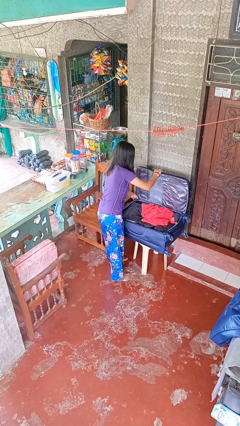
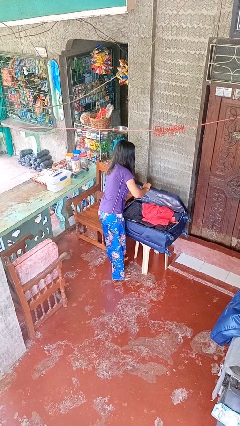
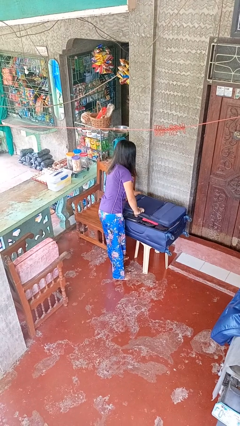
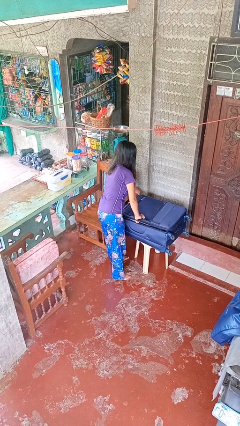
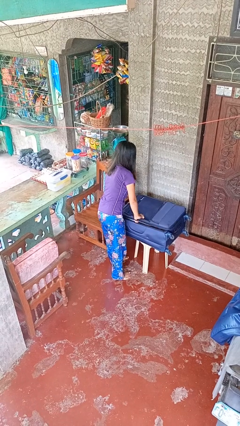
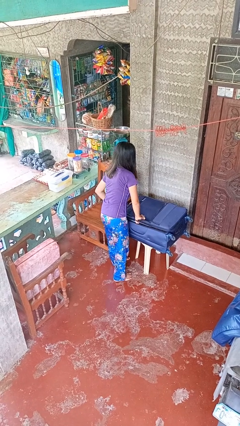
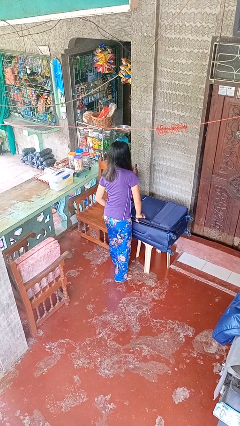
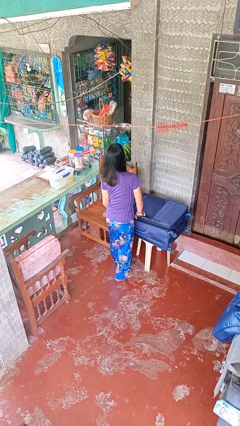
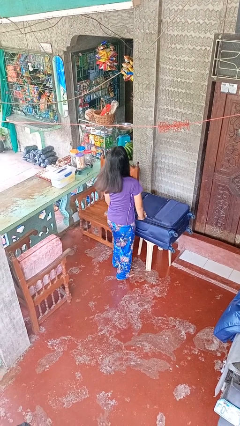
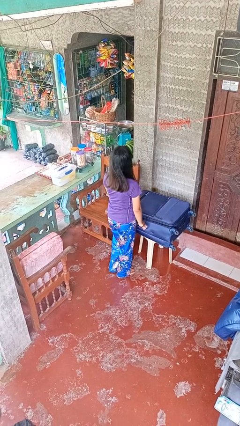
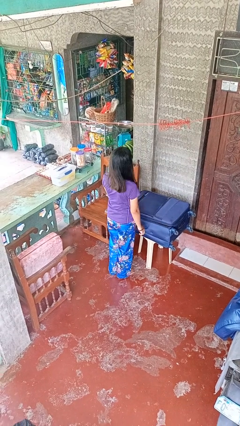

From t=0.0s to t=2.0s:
person closes suitcase

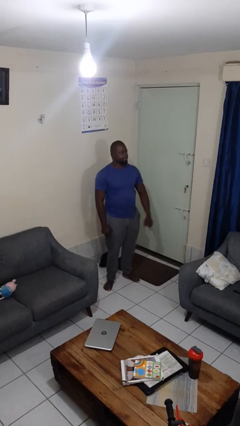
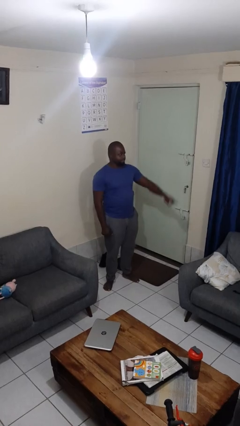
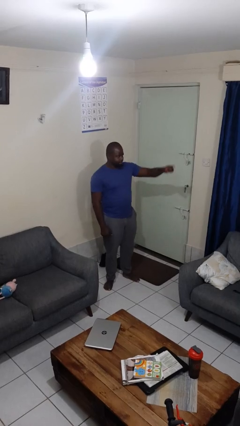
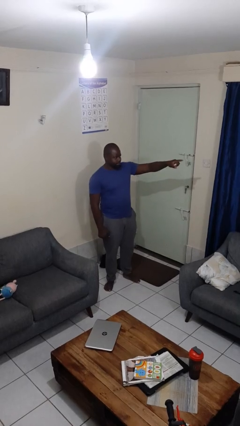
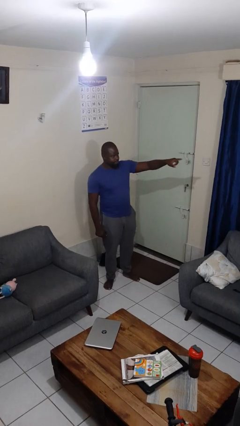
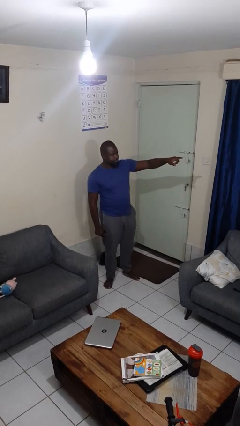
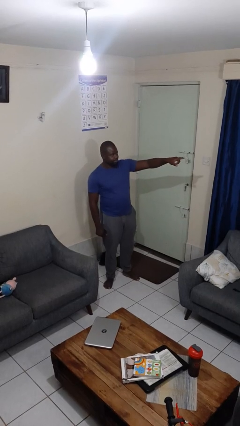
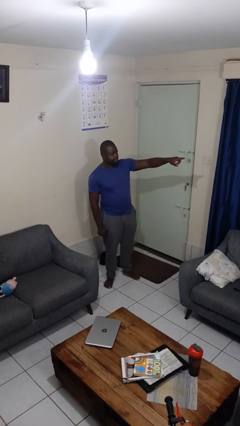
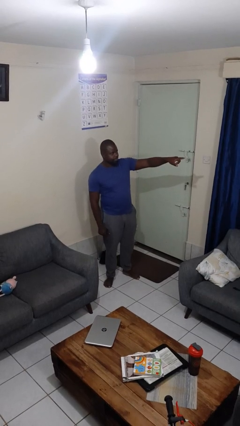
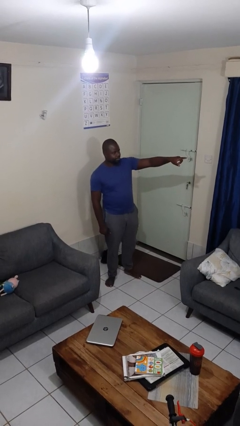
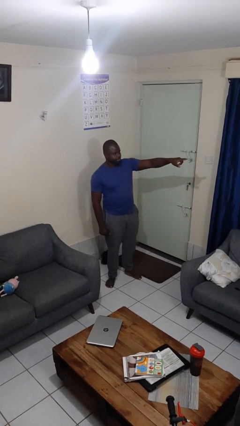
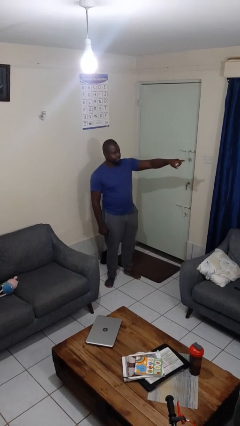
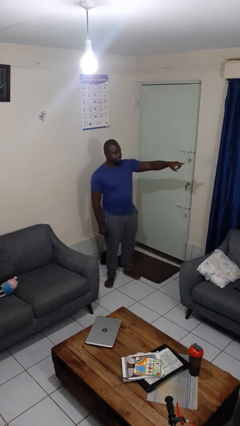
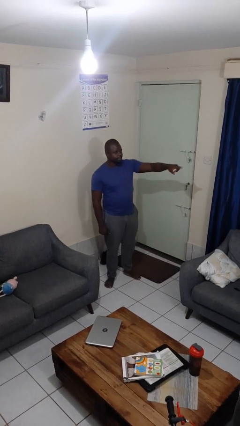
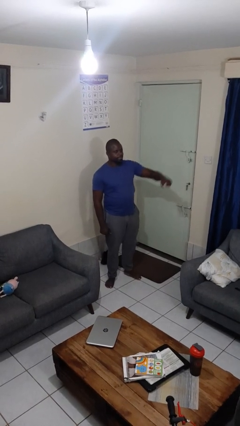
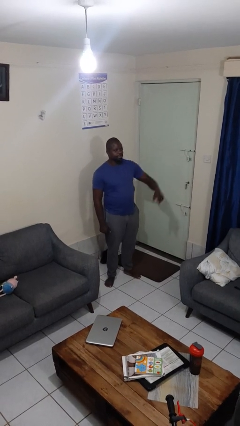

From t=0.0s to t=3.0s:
person points at person

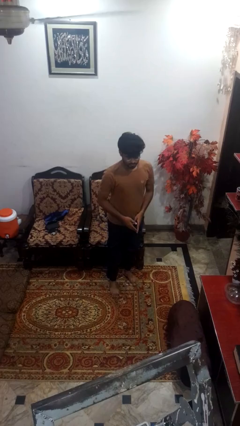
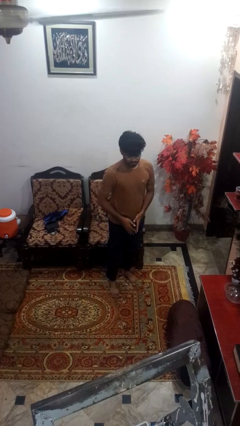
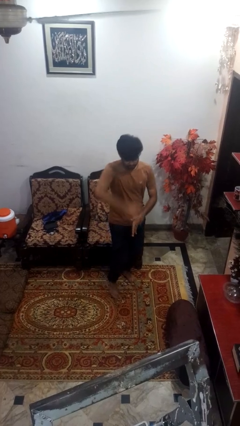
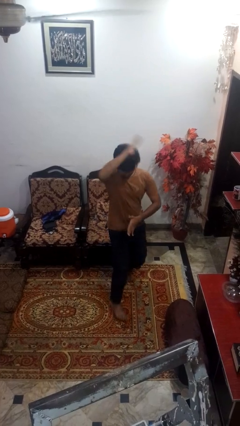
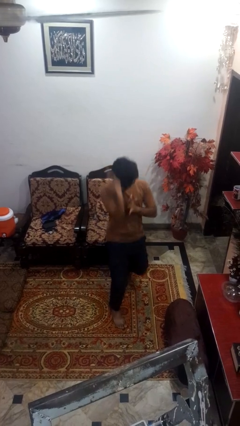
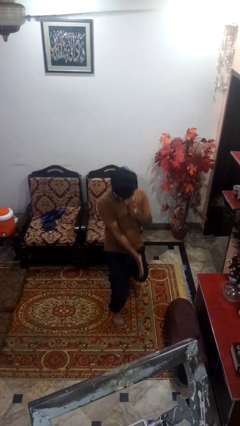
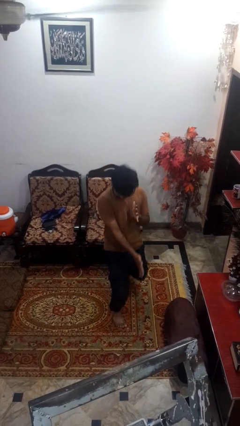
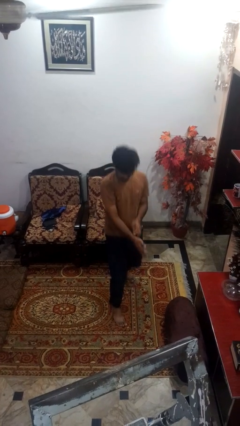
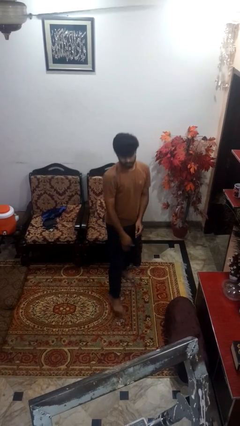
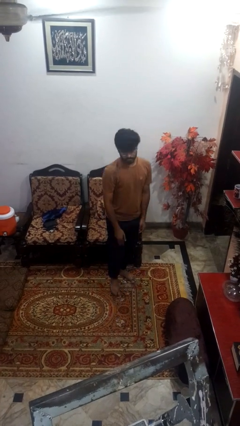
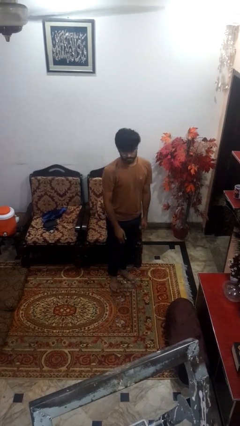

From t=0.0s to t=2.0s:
person karate chop

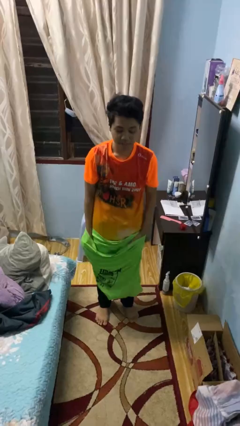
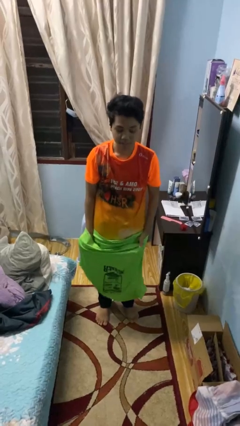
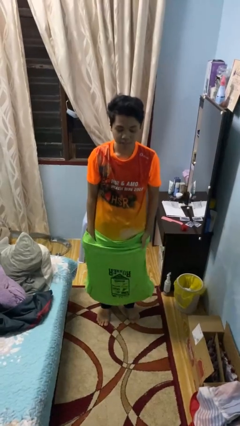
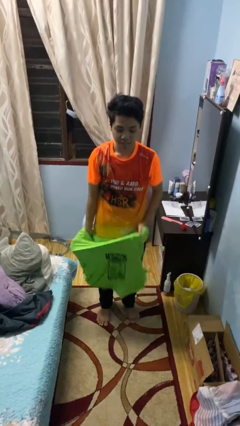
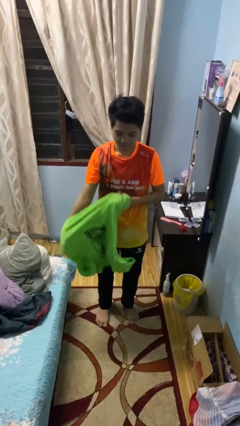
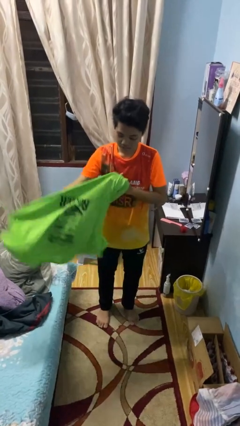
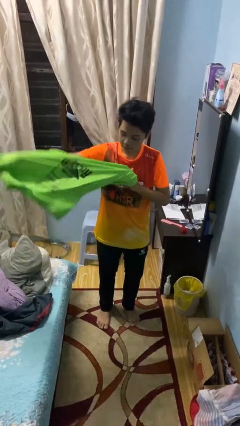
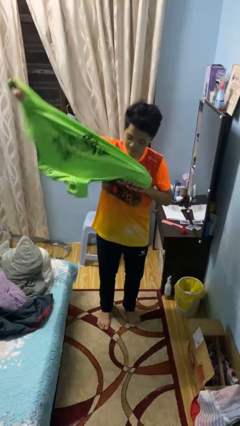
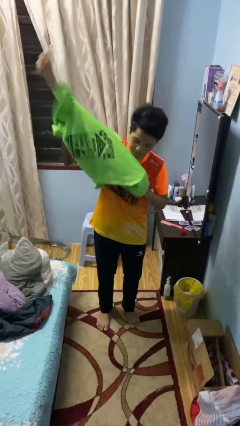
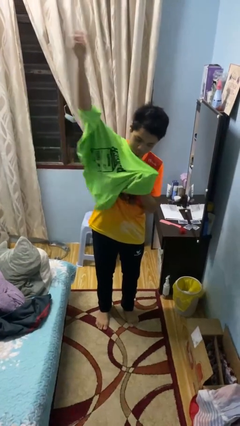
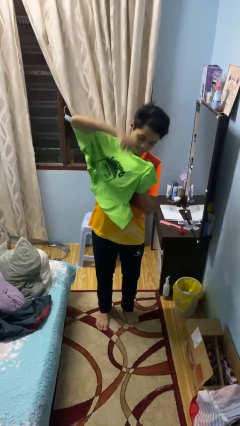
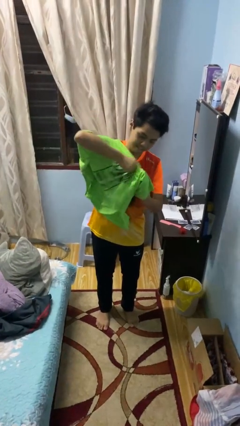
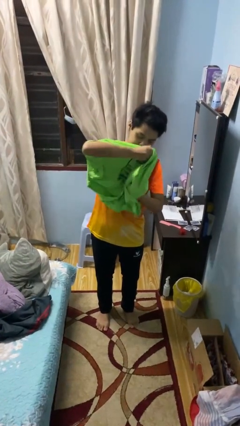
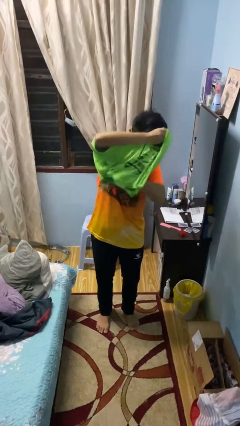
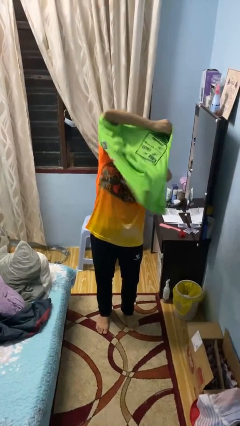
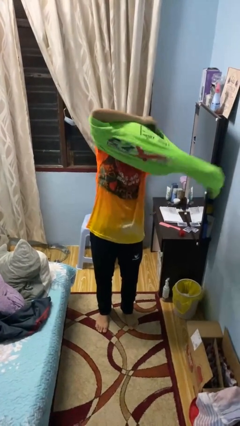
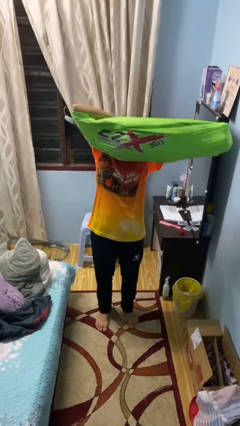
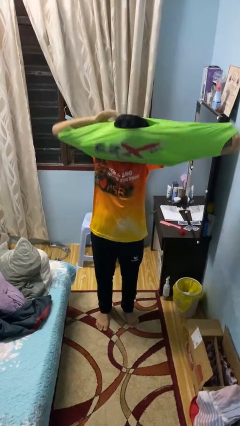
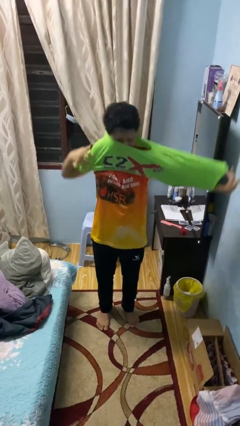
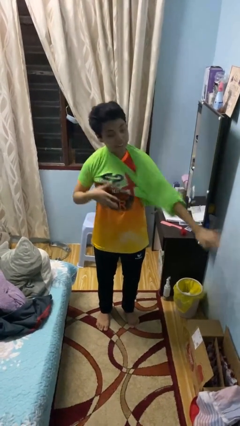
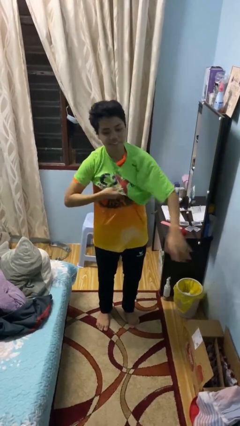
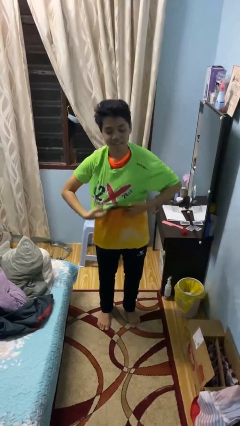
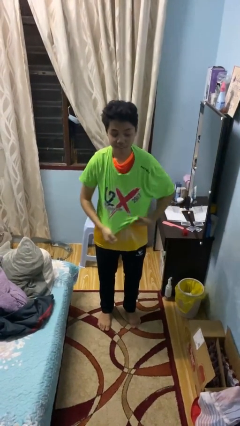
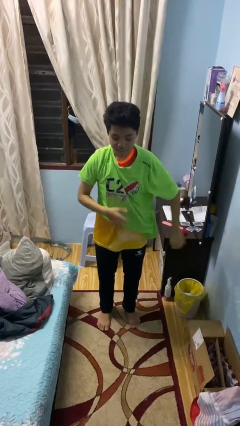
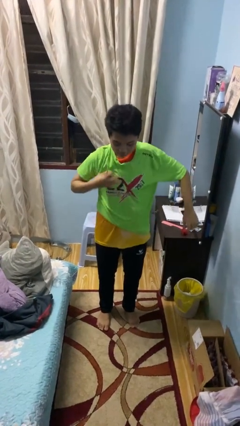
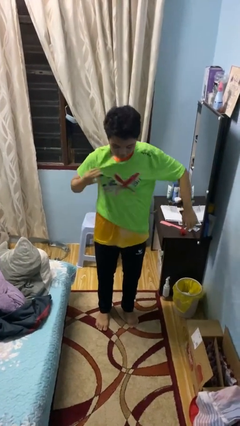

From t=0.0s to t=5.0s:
person puts on shirt

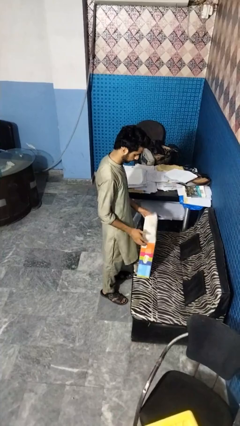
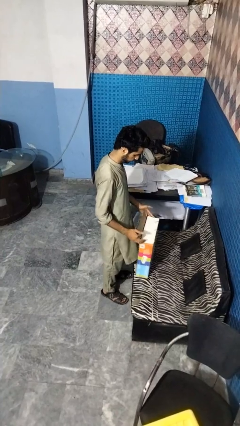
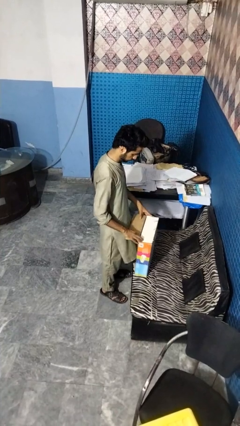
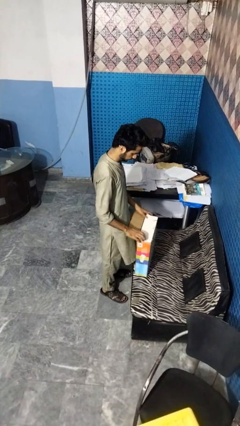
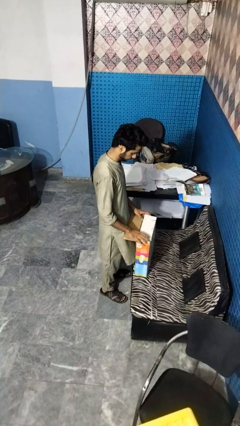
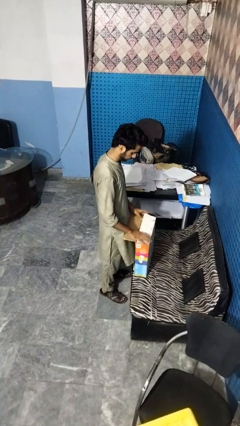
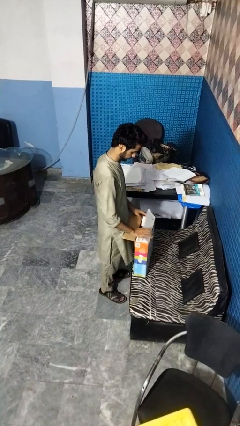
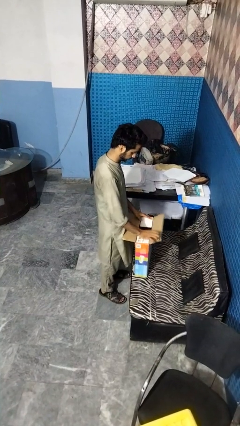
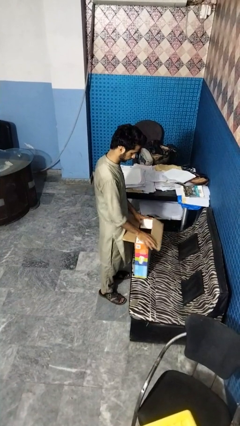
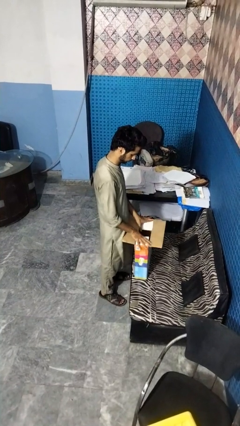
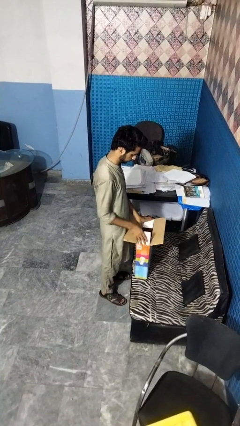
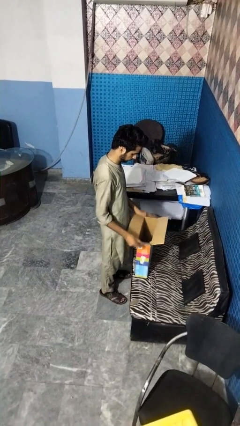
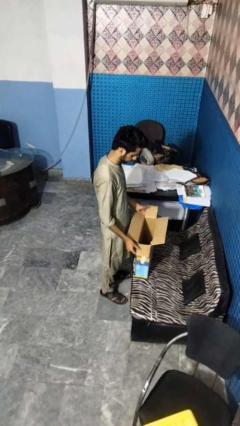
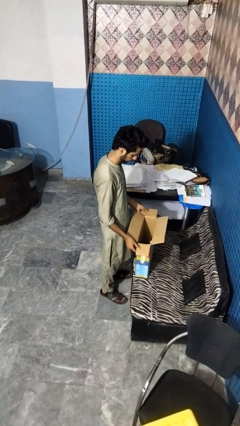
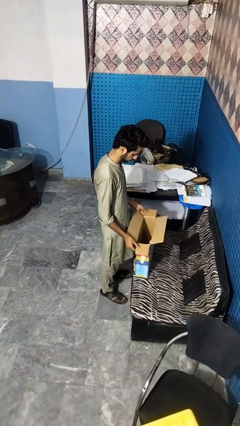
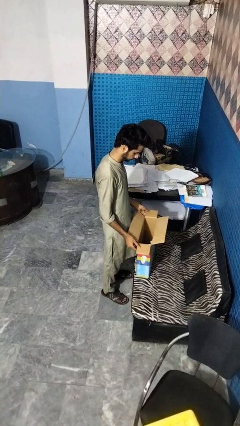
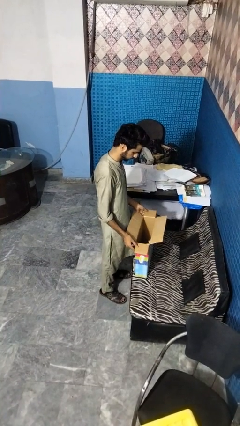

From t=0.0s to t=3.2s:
person opens box

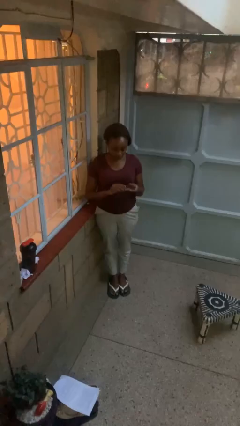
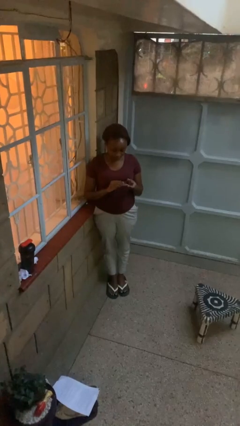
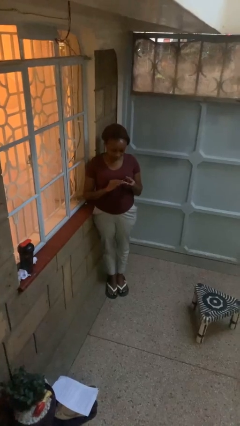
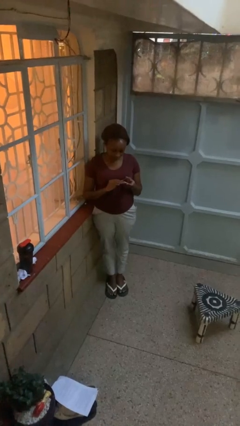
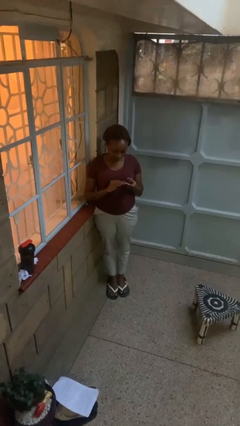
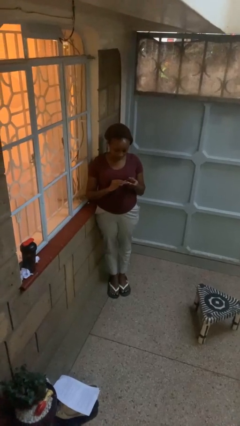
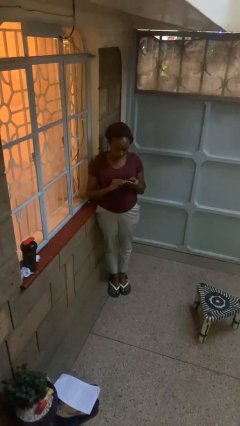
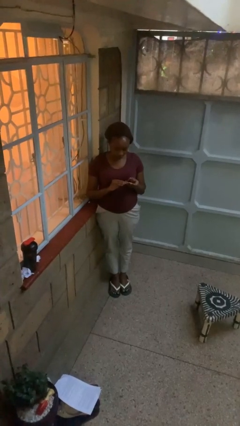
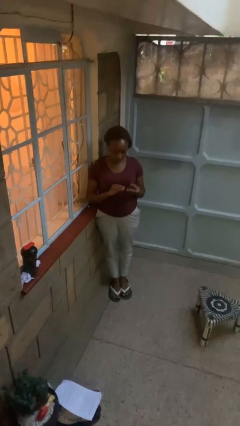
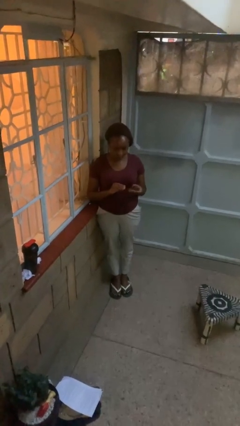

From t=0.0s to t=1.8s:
person clips fingernails

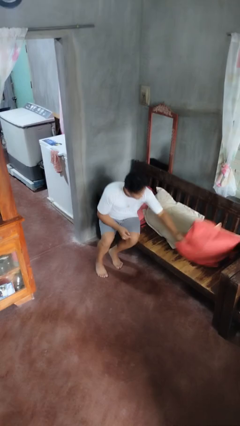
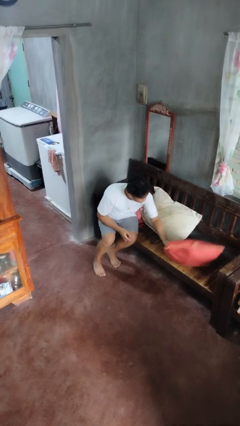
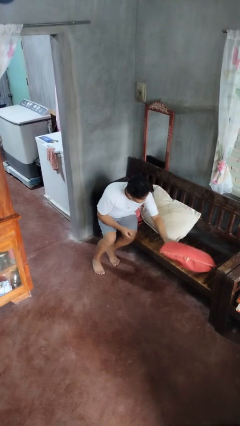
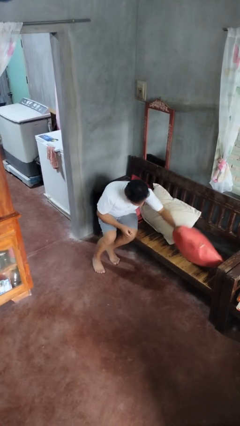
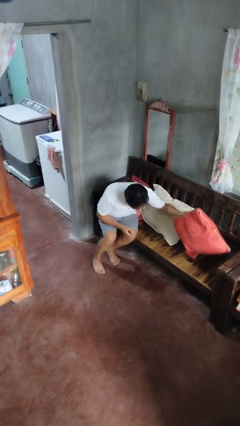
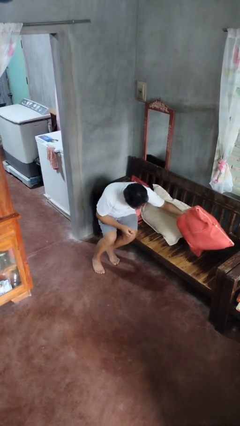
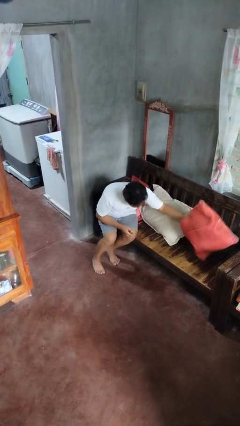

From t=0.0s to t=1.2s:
person searches in couch
